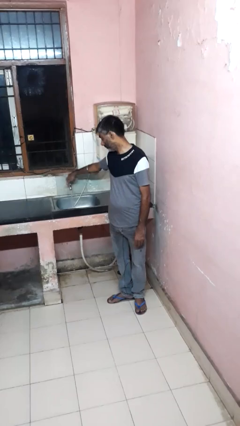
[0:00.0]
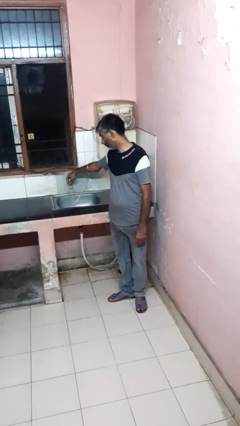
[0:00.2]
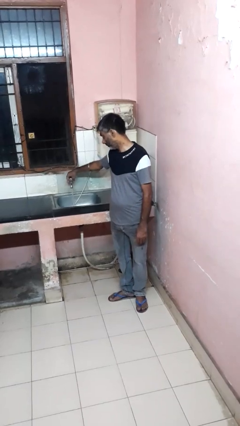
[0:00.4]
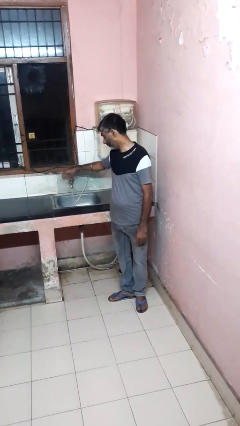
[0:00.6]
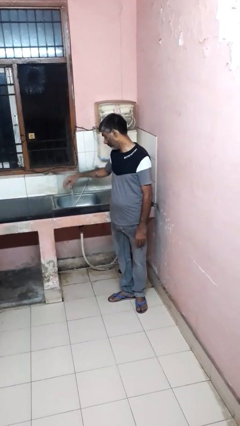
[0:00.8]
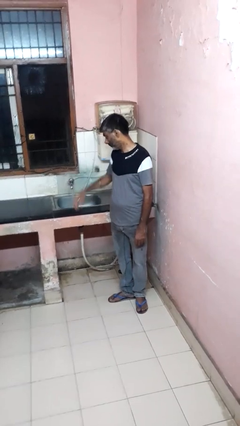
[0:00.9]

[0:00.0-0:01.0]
person turns on faucet

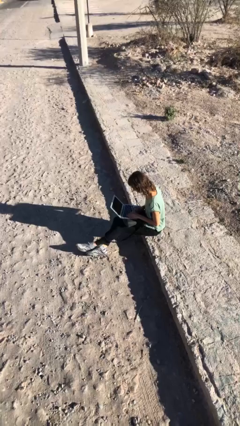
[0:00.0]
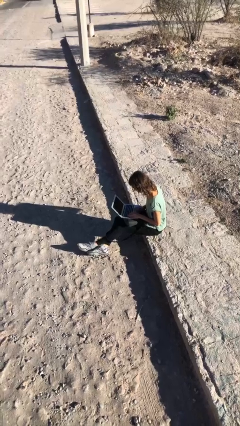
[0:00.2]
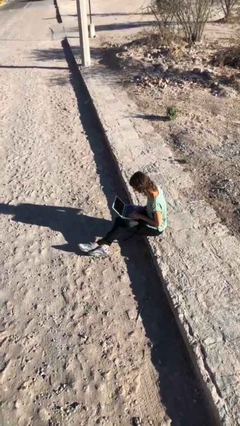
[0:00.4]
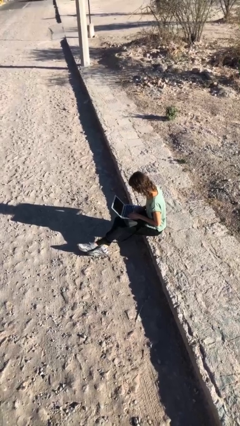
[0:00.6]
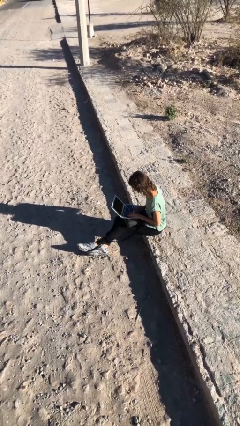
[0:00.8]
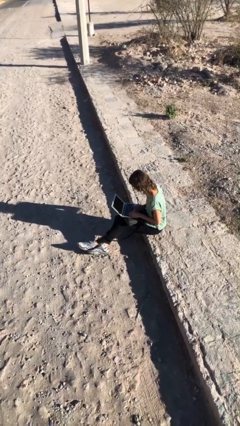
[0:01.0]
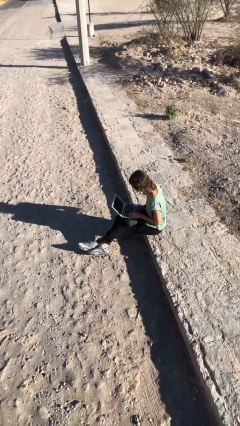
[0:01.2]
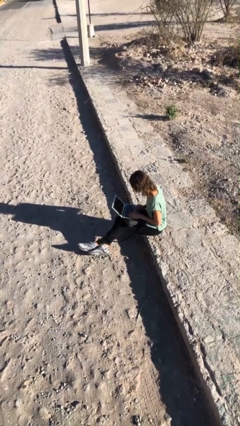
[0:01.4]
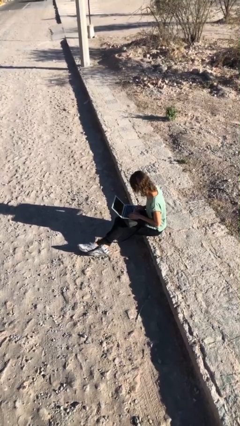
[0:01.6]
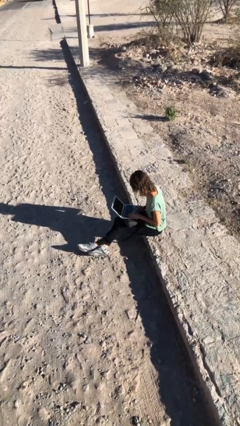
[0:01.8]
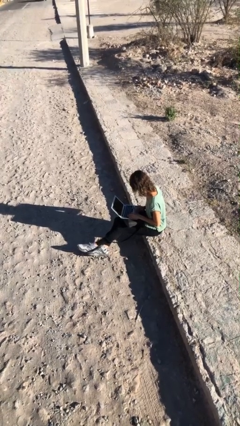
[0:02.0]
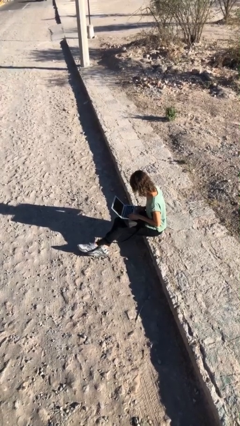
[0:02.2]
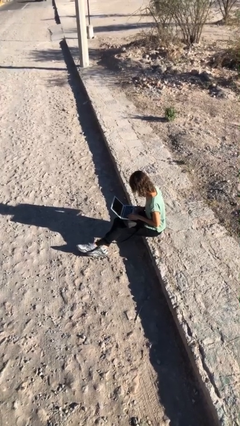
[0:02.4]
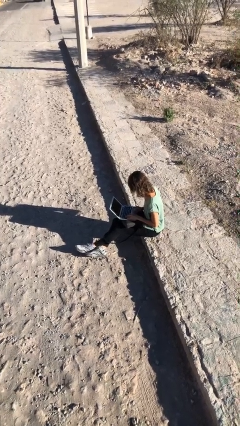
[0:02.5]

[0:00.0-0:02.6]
person interacts with laptop

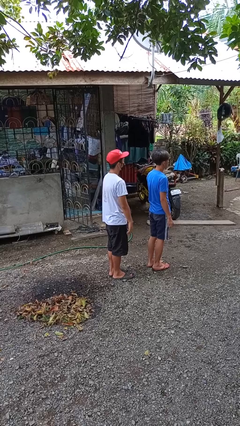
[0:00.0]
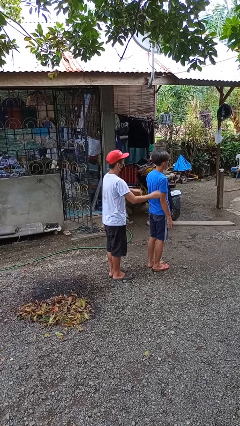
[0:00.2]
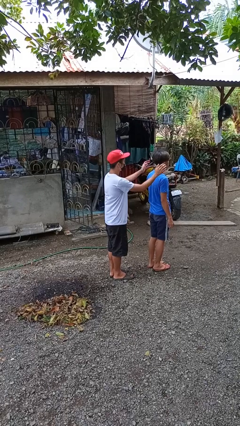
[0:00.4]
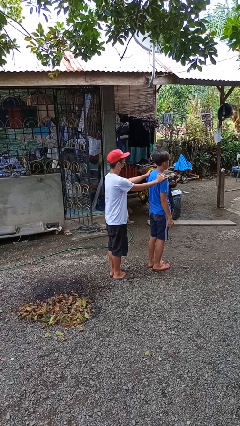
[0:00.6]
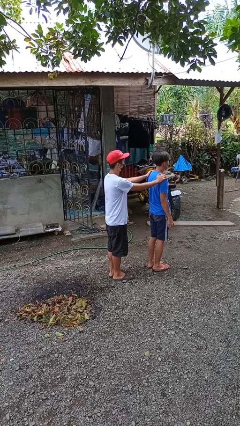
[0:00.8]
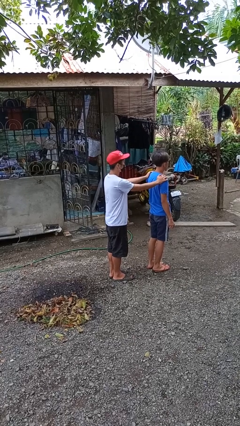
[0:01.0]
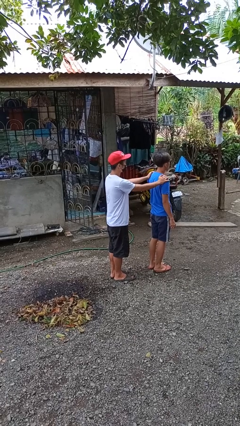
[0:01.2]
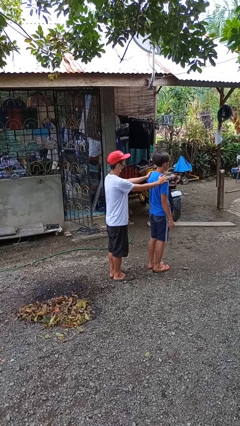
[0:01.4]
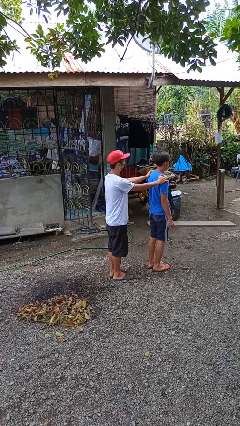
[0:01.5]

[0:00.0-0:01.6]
person grabs person by shoulder

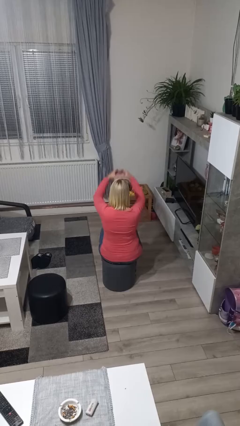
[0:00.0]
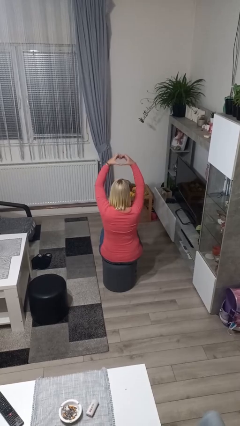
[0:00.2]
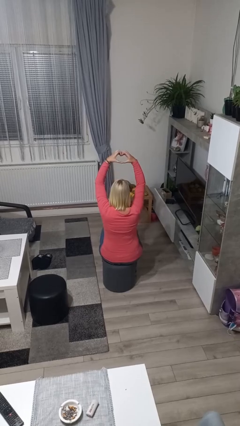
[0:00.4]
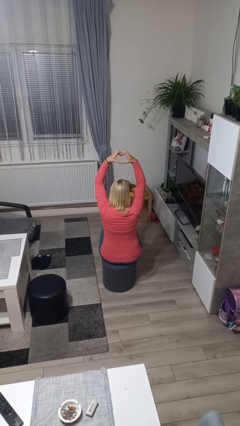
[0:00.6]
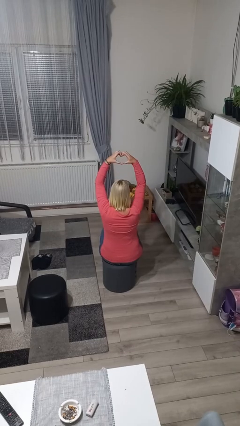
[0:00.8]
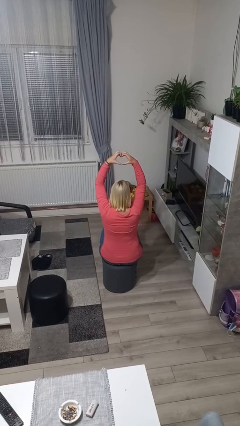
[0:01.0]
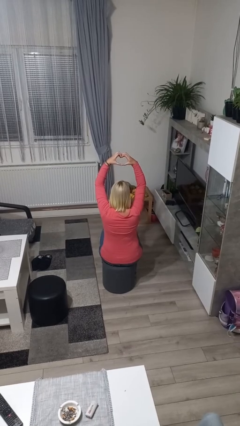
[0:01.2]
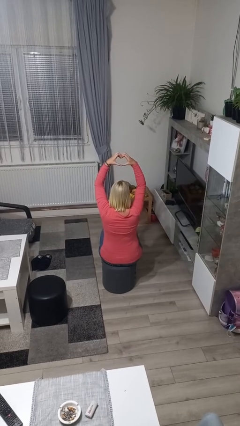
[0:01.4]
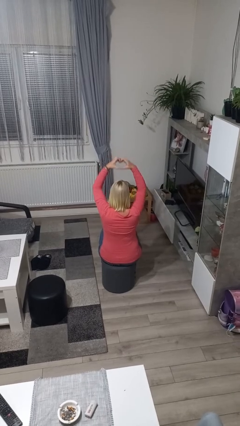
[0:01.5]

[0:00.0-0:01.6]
person gestures heart

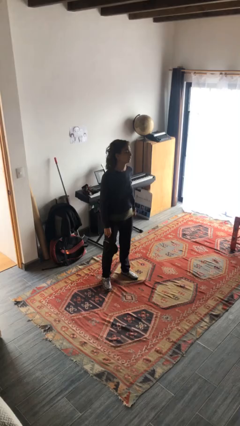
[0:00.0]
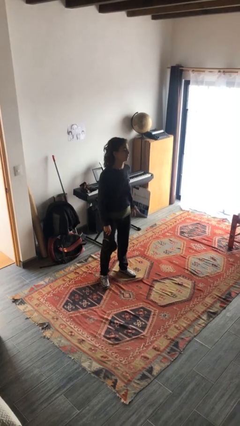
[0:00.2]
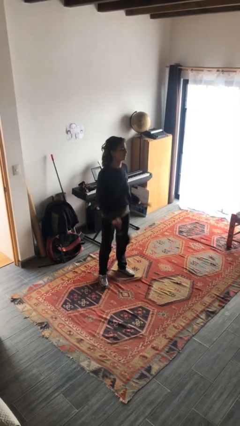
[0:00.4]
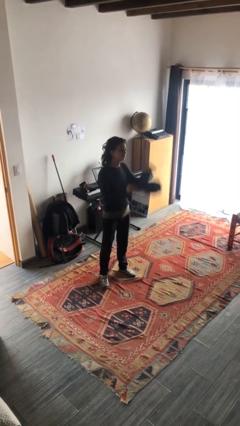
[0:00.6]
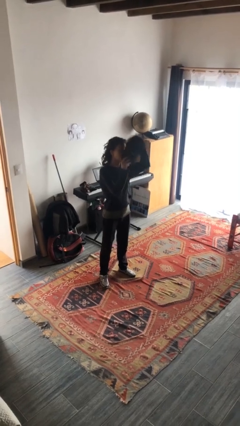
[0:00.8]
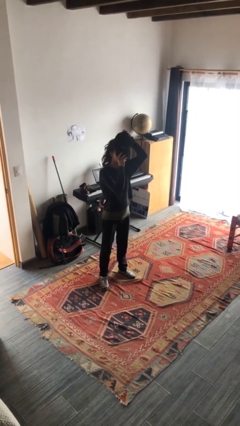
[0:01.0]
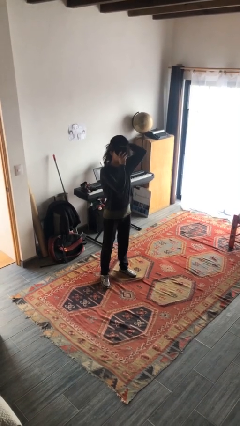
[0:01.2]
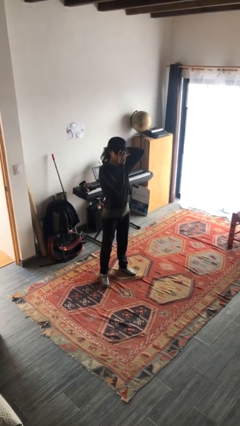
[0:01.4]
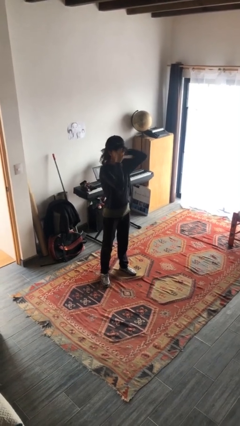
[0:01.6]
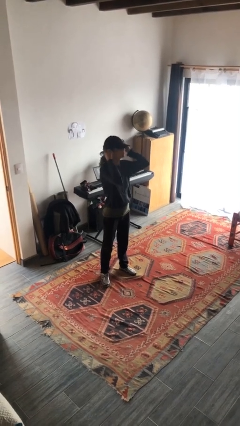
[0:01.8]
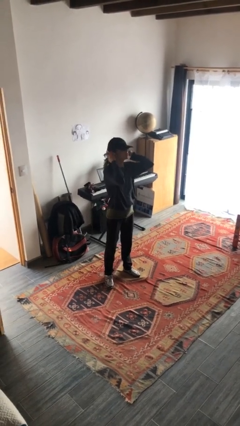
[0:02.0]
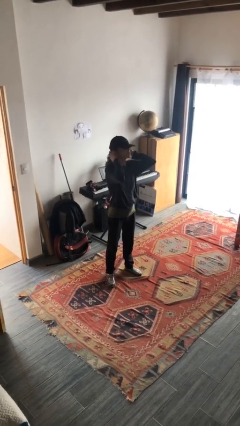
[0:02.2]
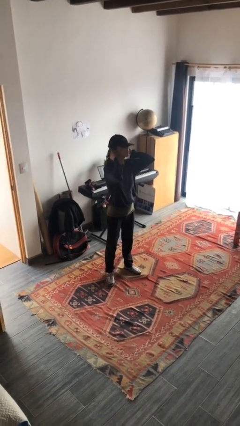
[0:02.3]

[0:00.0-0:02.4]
person puts on hat

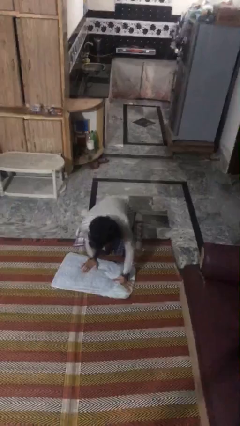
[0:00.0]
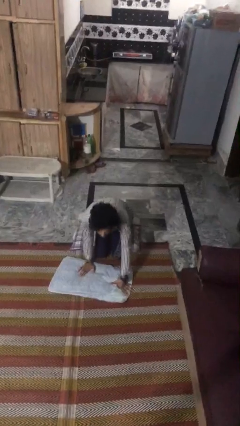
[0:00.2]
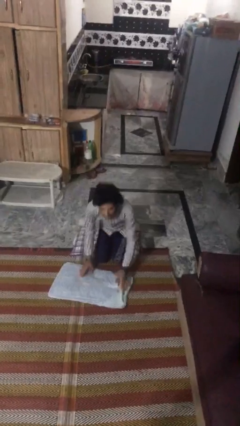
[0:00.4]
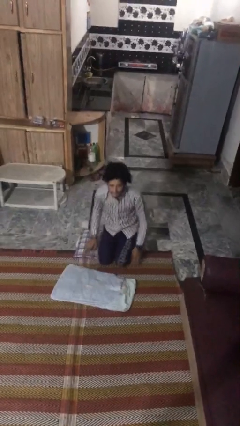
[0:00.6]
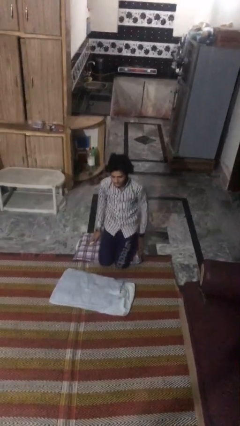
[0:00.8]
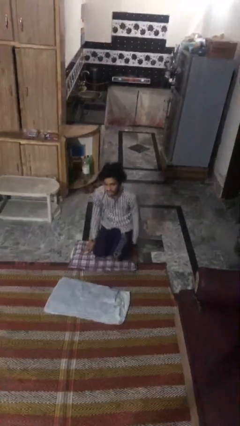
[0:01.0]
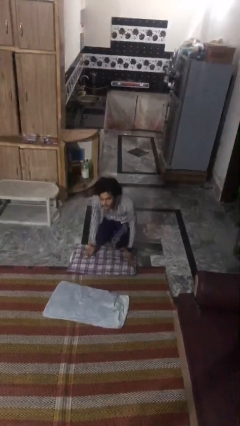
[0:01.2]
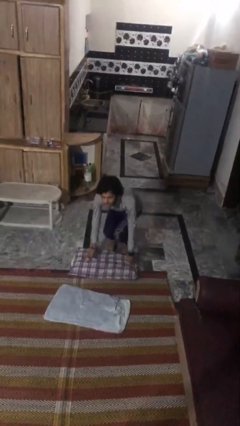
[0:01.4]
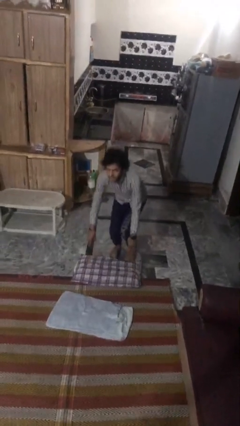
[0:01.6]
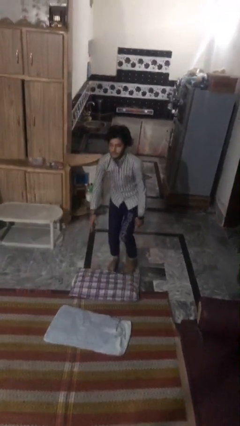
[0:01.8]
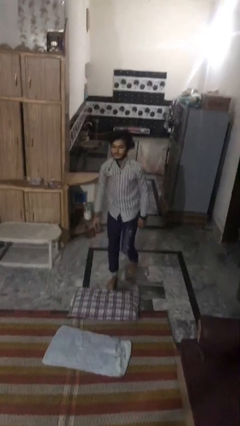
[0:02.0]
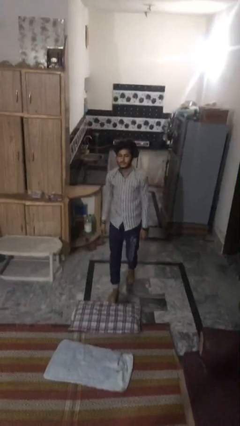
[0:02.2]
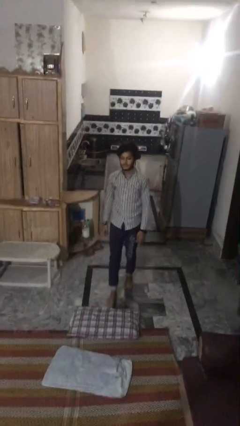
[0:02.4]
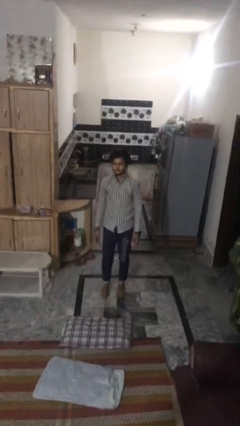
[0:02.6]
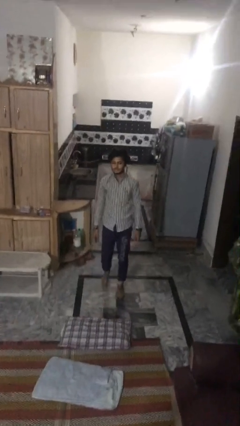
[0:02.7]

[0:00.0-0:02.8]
person stands up from floor

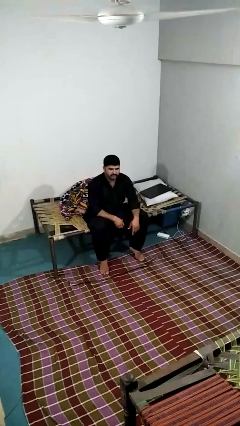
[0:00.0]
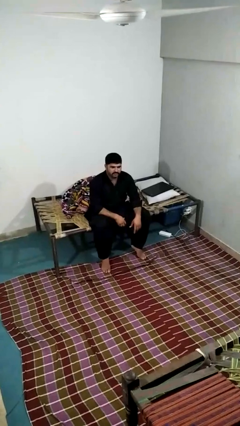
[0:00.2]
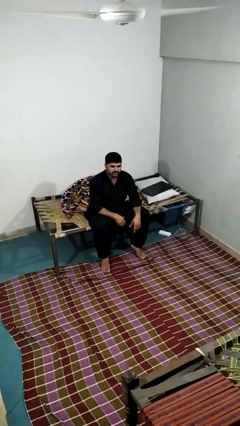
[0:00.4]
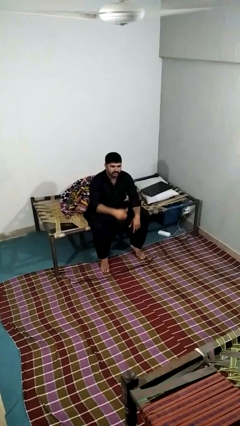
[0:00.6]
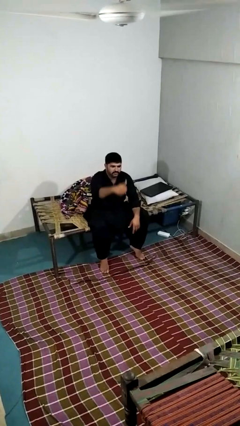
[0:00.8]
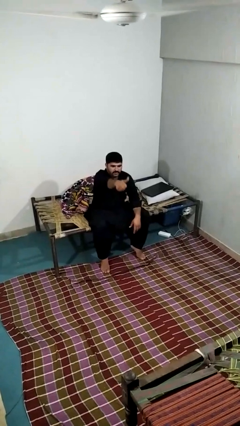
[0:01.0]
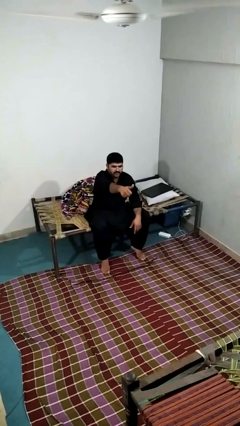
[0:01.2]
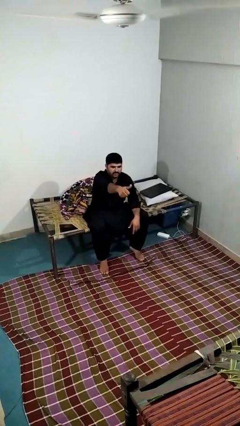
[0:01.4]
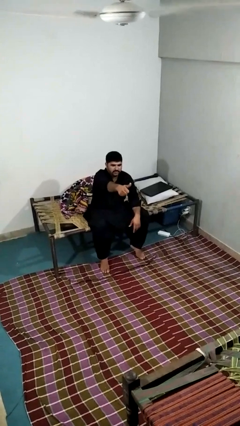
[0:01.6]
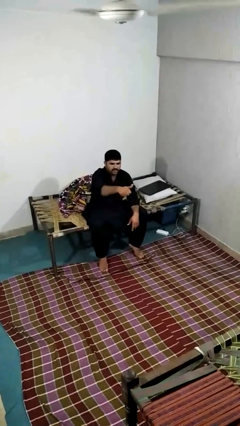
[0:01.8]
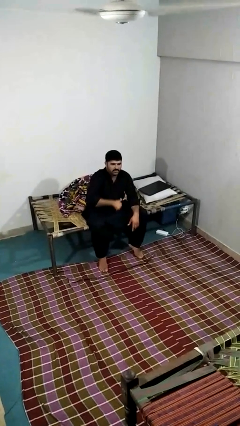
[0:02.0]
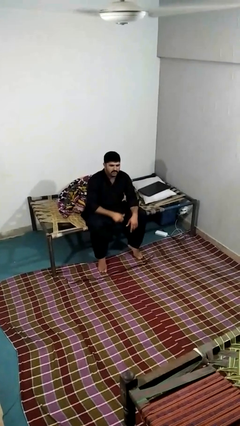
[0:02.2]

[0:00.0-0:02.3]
person gestures thumbs up

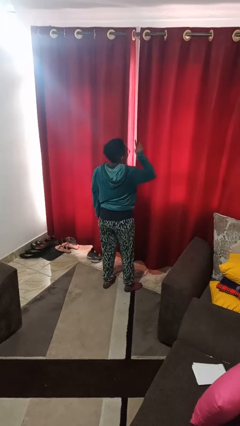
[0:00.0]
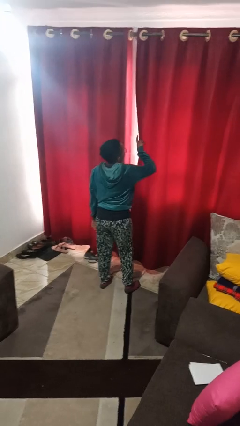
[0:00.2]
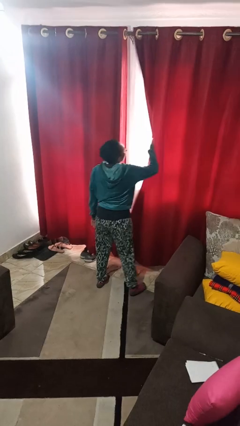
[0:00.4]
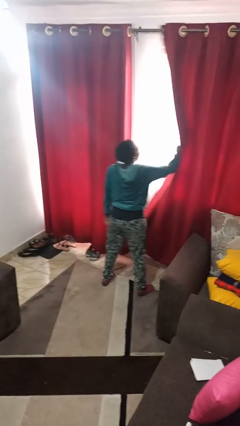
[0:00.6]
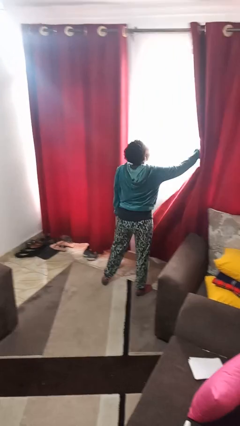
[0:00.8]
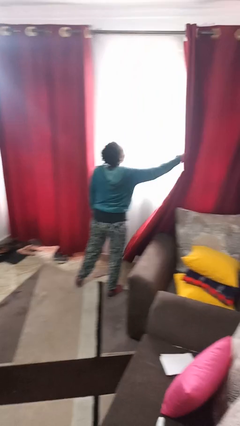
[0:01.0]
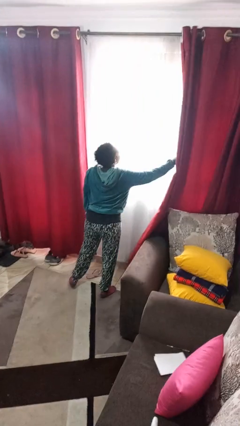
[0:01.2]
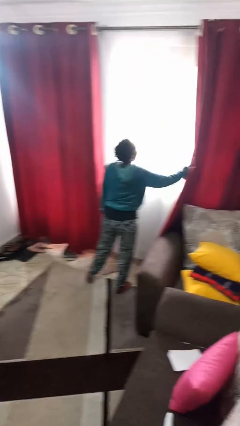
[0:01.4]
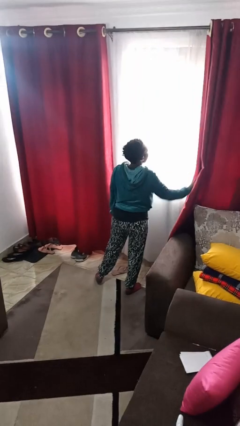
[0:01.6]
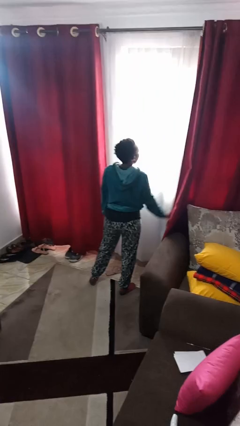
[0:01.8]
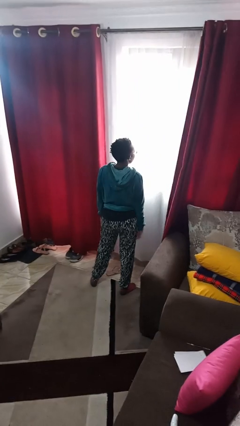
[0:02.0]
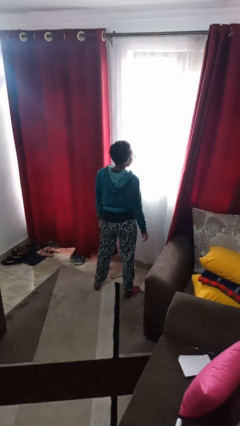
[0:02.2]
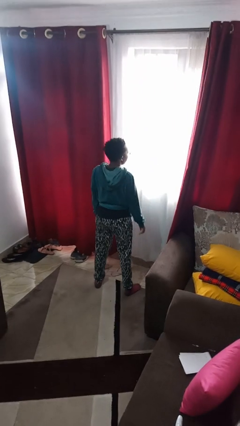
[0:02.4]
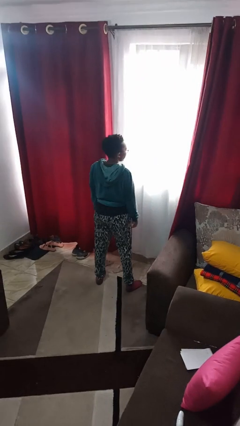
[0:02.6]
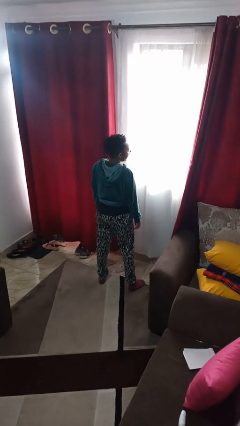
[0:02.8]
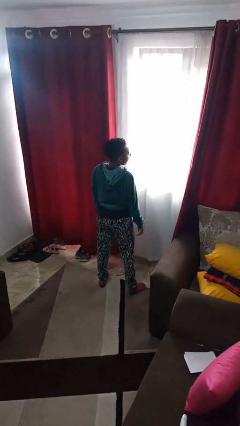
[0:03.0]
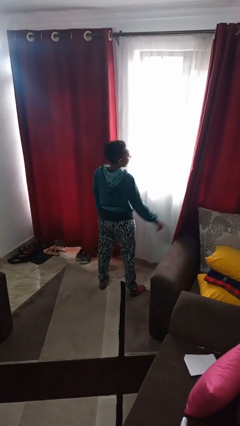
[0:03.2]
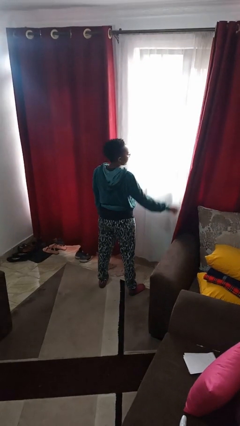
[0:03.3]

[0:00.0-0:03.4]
person opens curtains
